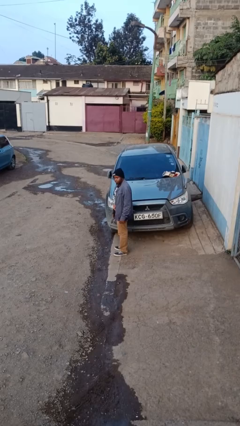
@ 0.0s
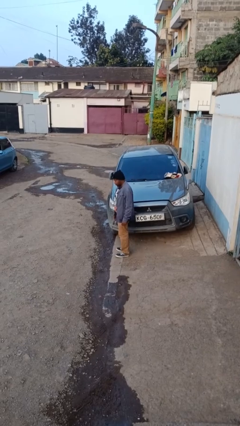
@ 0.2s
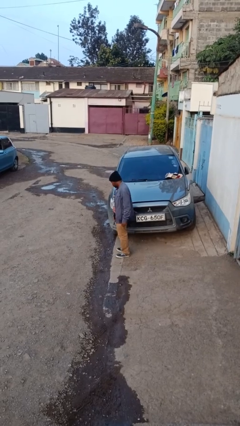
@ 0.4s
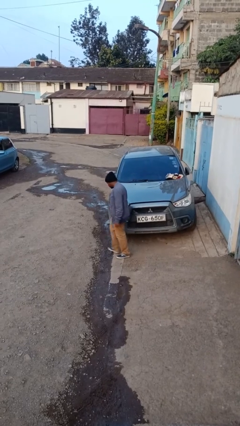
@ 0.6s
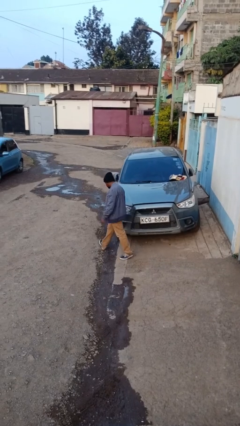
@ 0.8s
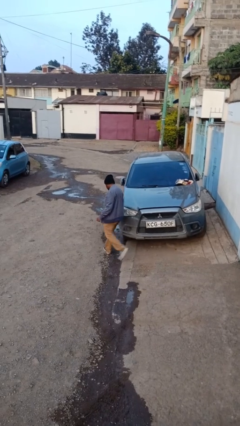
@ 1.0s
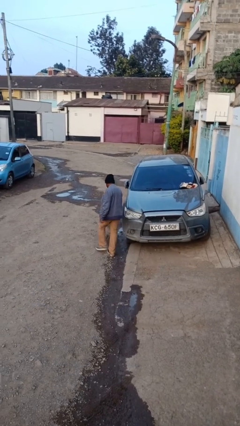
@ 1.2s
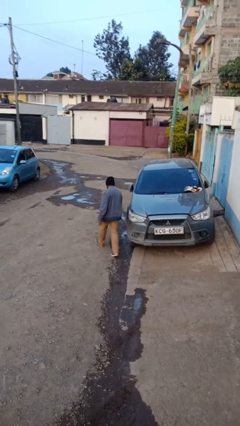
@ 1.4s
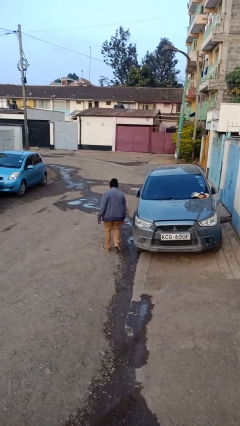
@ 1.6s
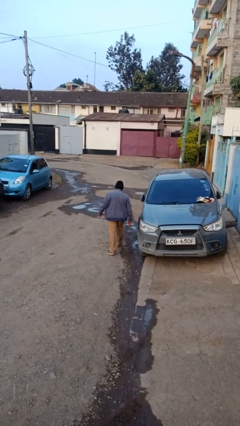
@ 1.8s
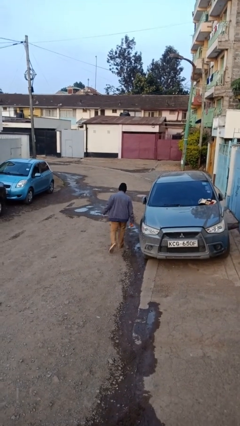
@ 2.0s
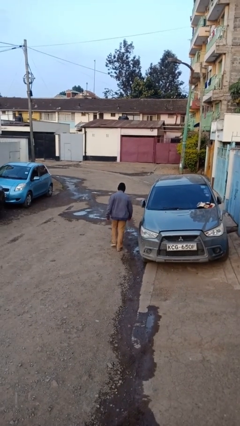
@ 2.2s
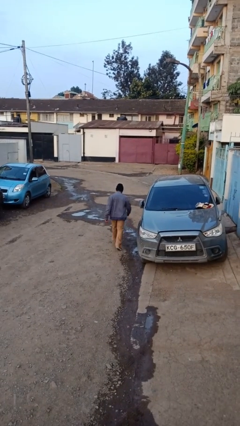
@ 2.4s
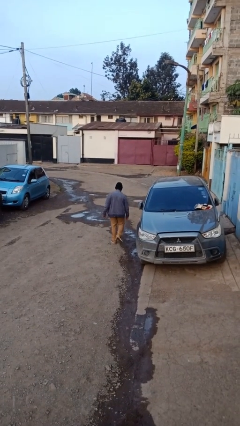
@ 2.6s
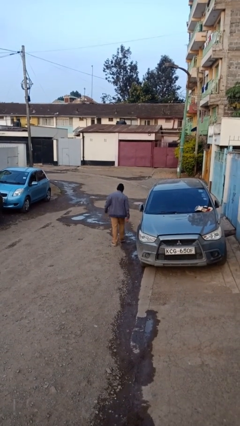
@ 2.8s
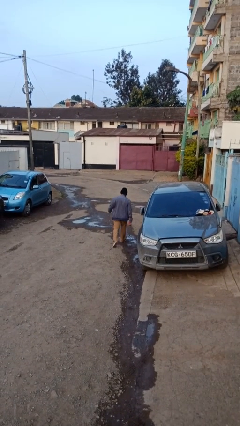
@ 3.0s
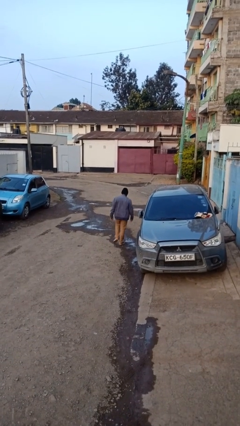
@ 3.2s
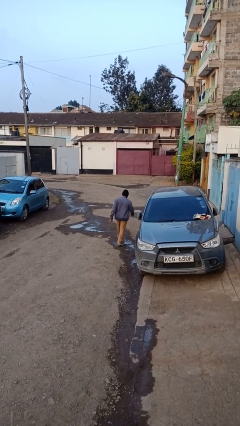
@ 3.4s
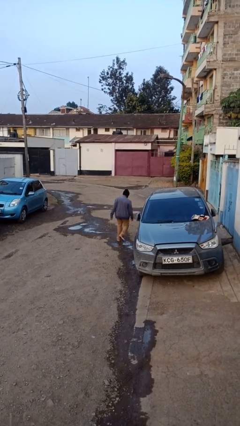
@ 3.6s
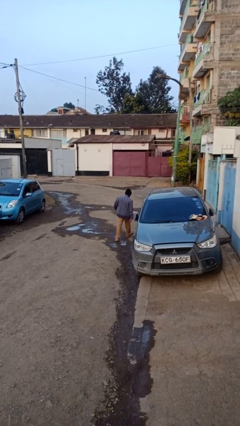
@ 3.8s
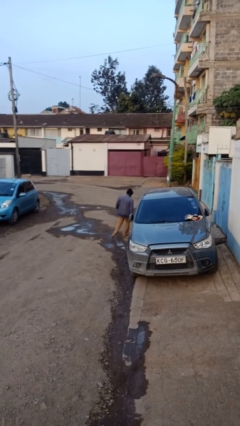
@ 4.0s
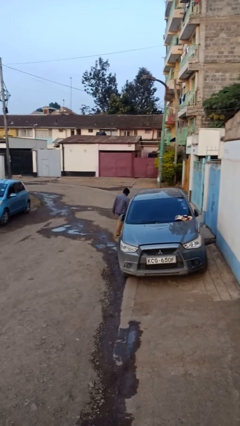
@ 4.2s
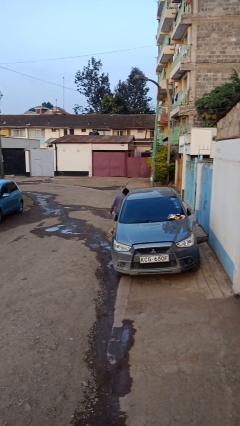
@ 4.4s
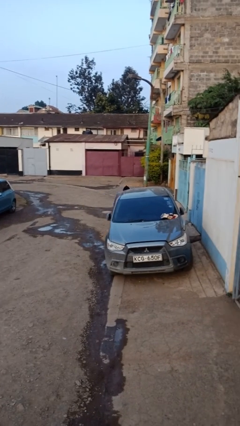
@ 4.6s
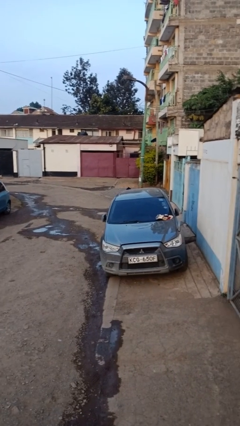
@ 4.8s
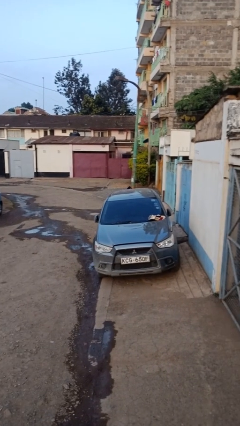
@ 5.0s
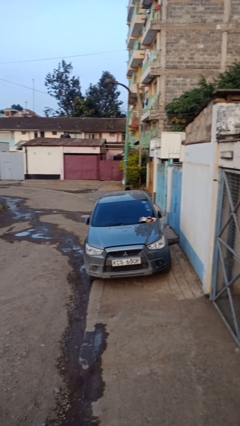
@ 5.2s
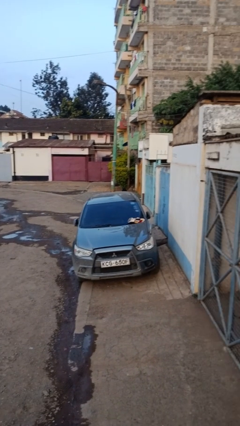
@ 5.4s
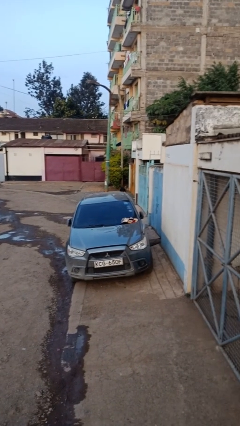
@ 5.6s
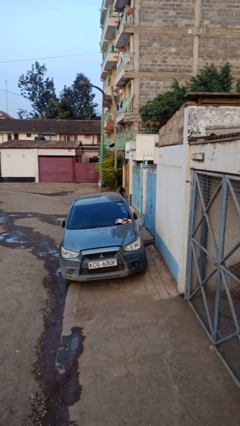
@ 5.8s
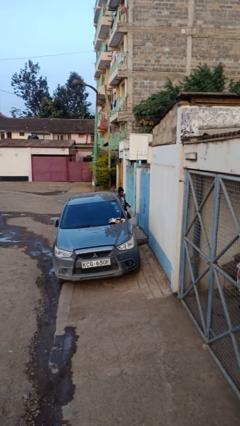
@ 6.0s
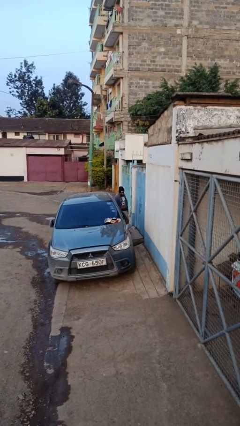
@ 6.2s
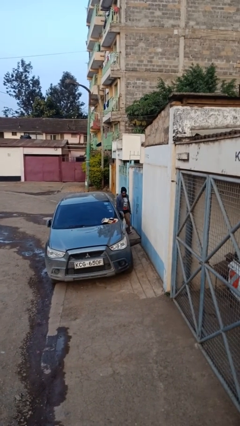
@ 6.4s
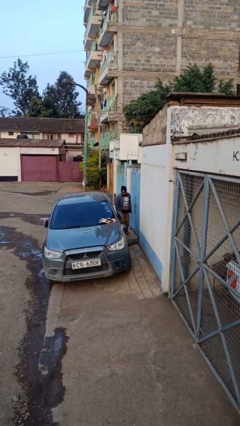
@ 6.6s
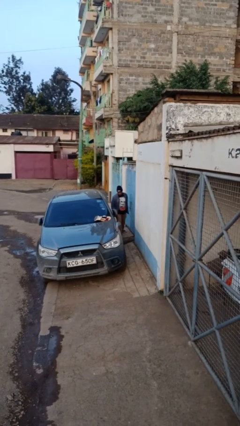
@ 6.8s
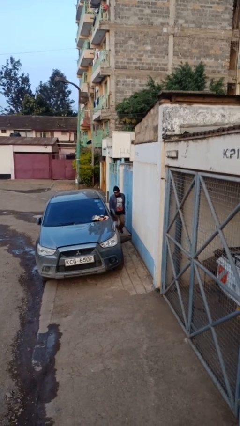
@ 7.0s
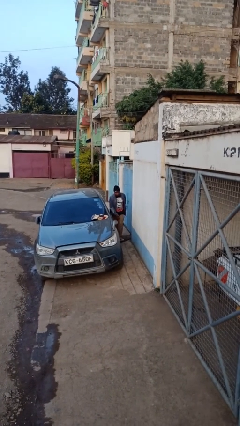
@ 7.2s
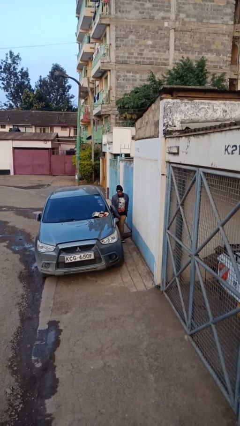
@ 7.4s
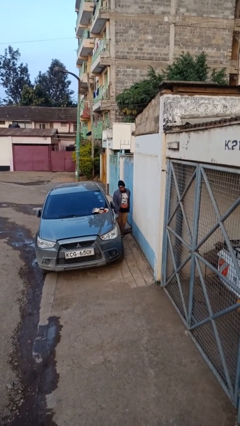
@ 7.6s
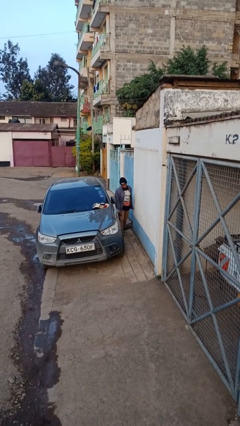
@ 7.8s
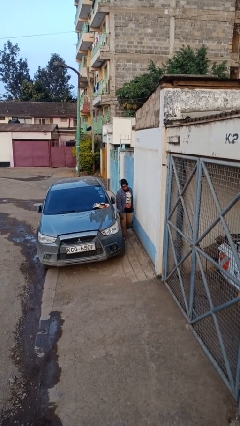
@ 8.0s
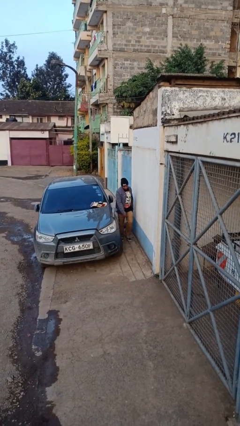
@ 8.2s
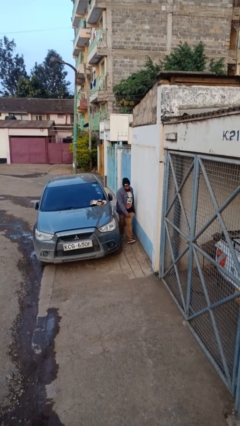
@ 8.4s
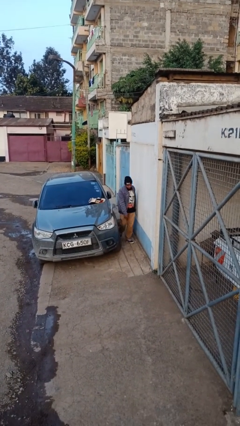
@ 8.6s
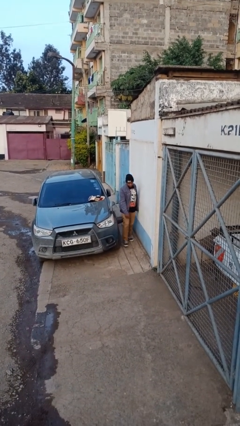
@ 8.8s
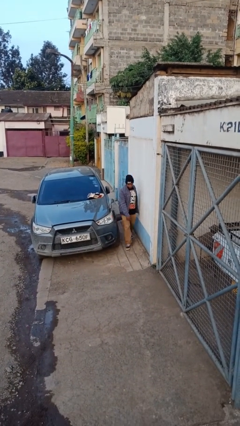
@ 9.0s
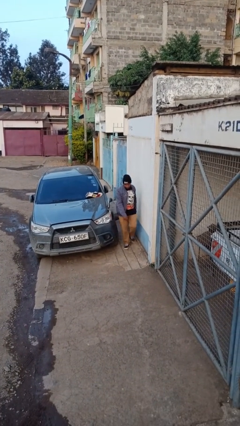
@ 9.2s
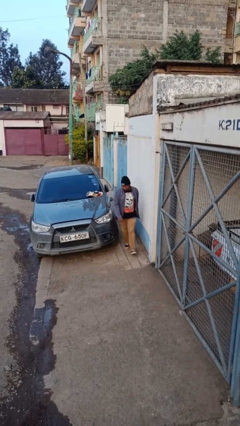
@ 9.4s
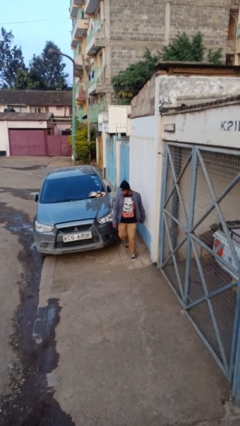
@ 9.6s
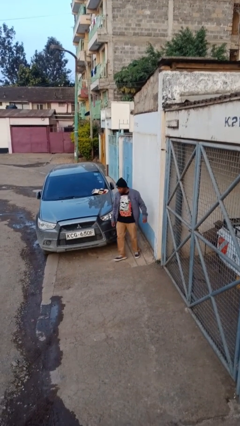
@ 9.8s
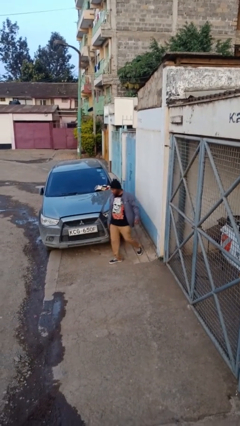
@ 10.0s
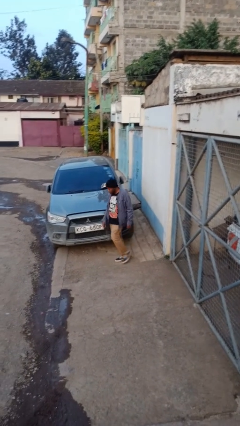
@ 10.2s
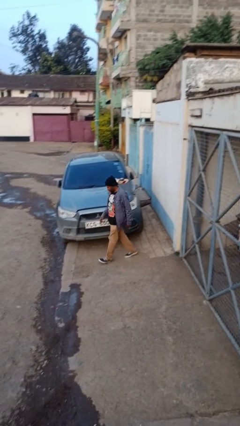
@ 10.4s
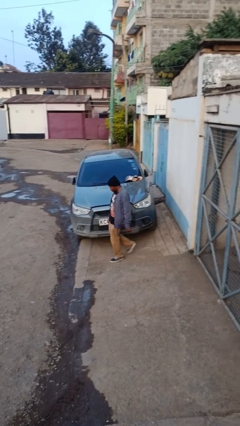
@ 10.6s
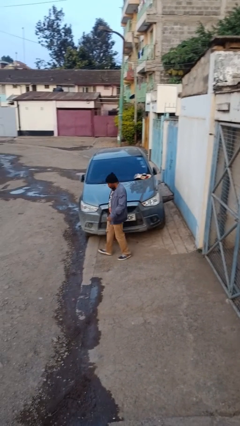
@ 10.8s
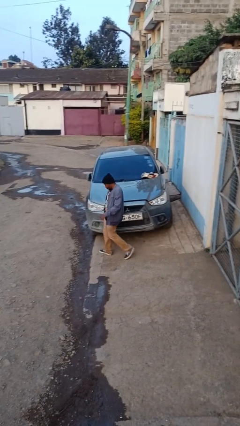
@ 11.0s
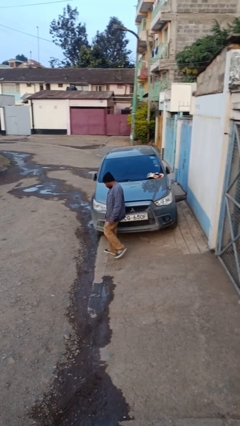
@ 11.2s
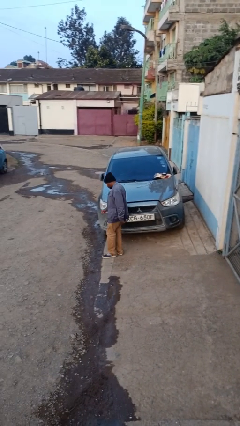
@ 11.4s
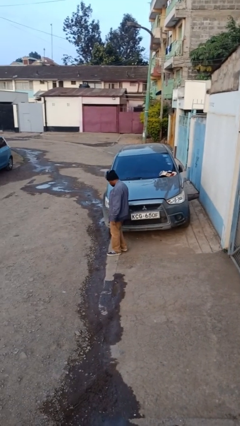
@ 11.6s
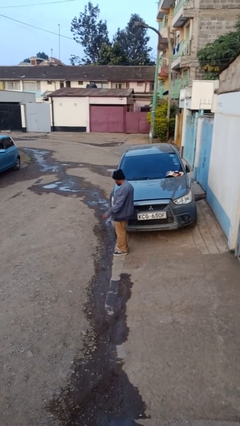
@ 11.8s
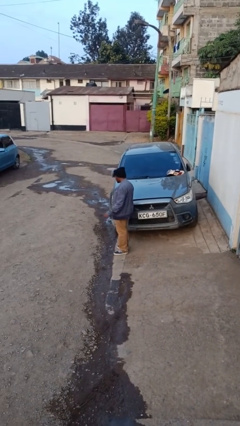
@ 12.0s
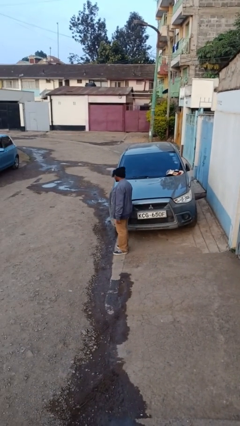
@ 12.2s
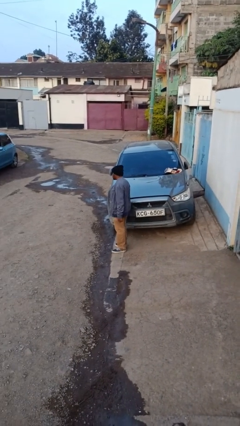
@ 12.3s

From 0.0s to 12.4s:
person walks around car

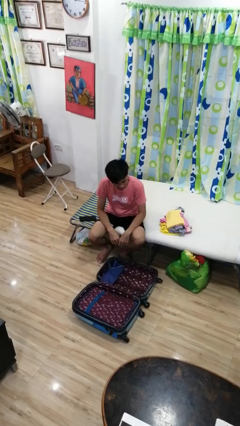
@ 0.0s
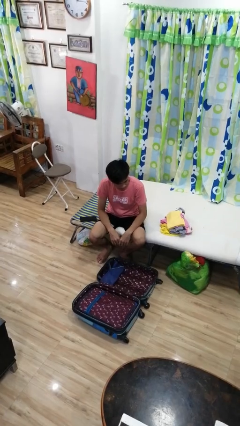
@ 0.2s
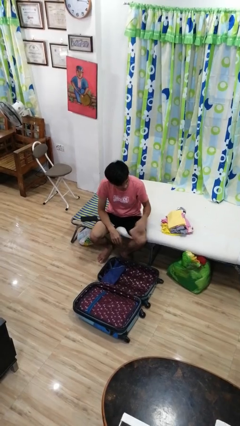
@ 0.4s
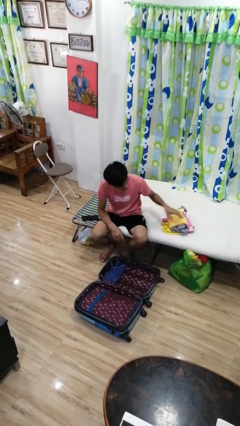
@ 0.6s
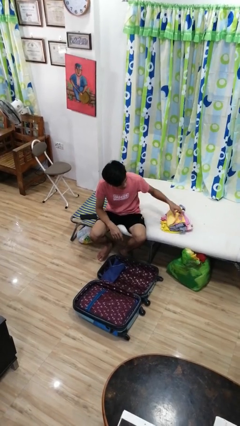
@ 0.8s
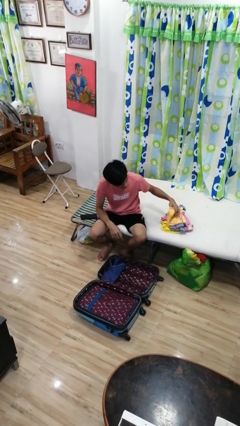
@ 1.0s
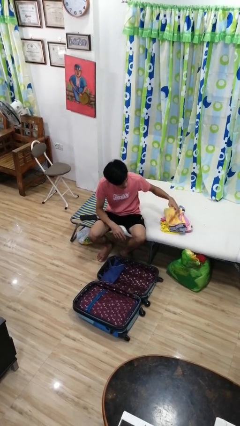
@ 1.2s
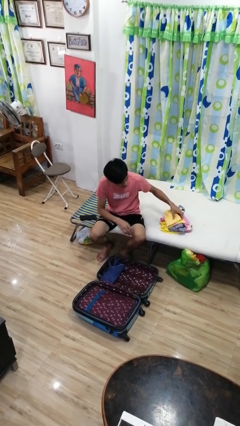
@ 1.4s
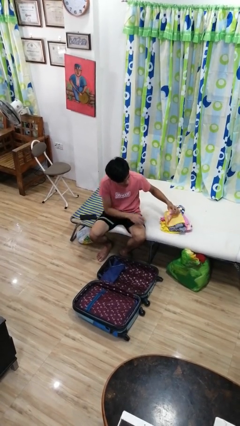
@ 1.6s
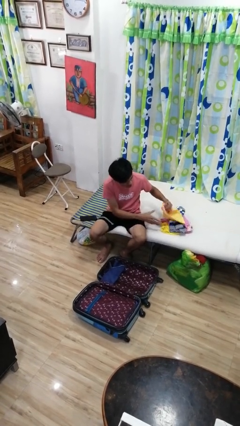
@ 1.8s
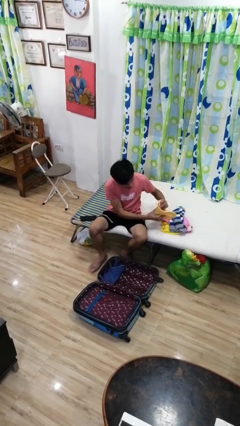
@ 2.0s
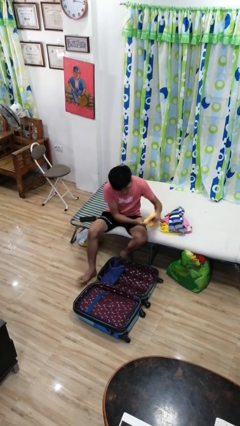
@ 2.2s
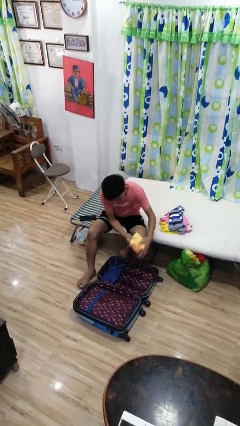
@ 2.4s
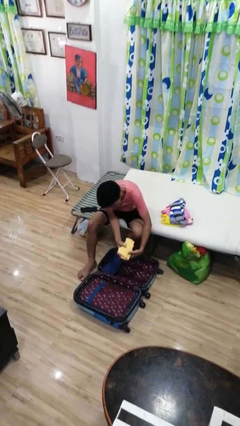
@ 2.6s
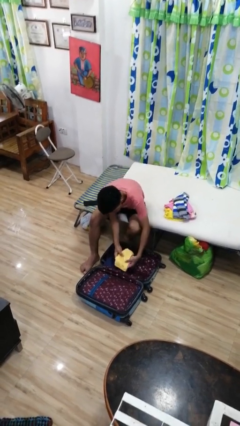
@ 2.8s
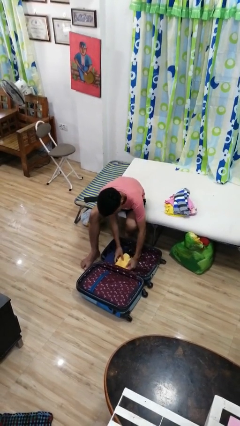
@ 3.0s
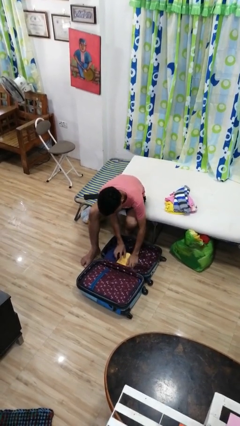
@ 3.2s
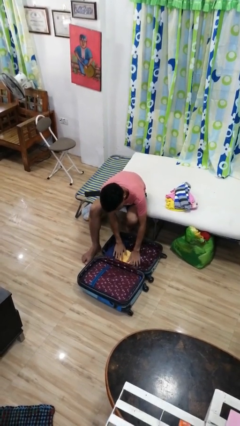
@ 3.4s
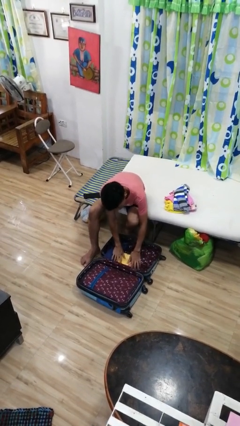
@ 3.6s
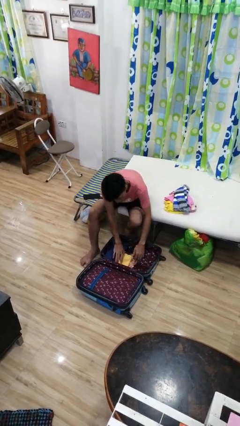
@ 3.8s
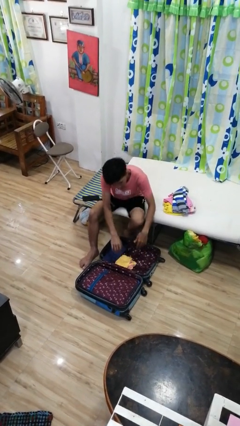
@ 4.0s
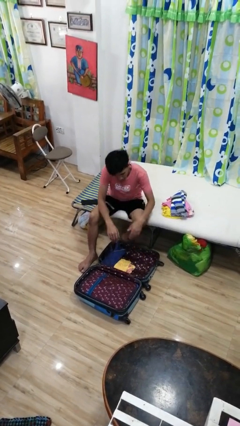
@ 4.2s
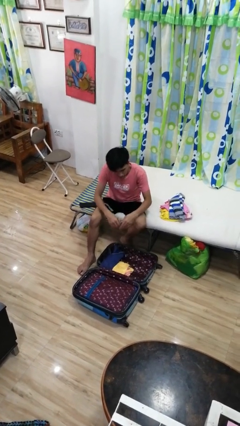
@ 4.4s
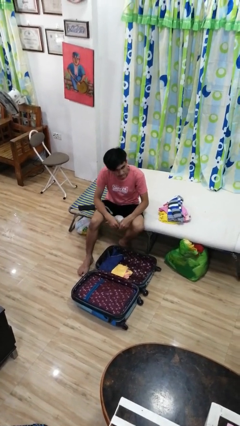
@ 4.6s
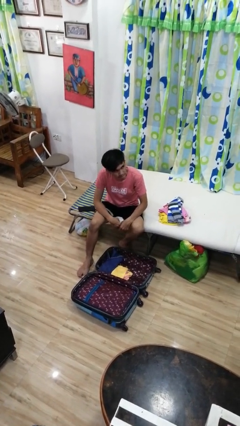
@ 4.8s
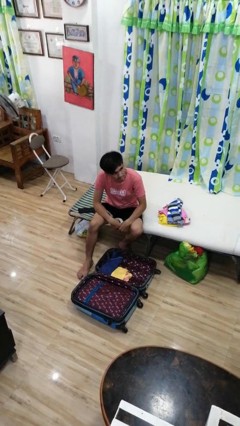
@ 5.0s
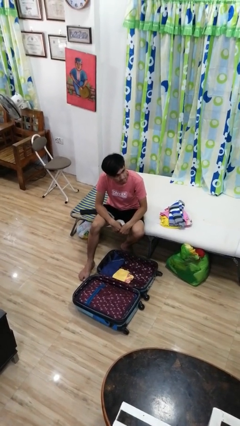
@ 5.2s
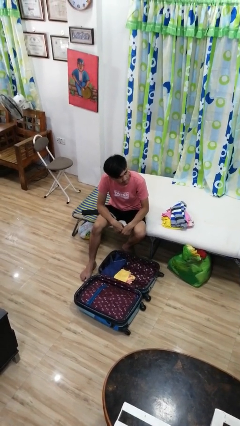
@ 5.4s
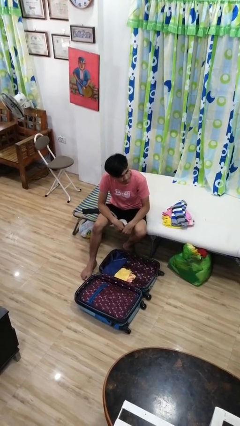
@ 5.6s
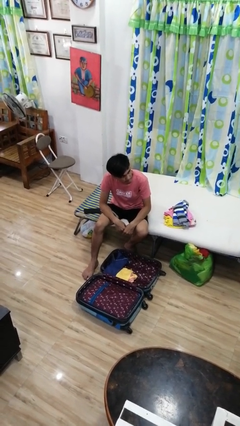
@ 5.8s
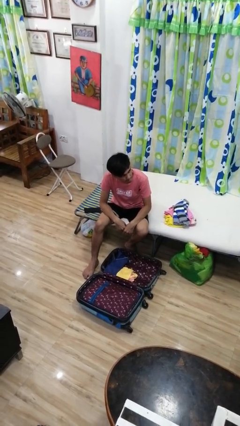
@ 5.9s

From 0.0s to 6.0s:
person loads clothes into suitcase

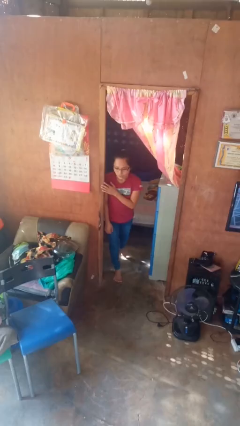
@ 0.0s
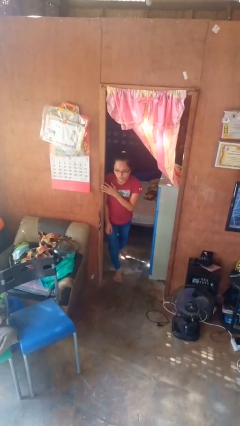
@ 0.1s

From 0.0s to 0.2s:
person bumps into wall
